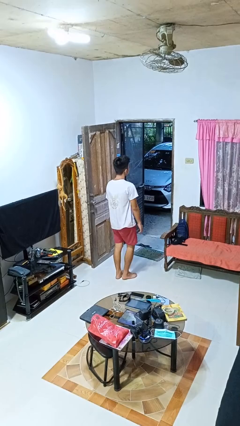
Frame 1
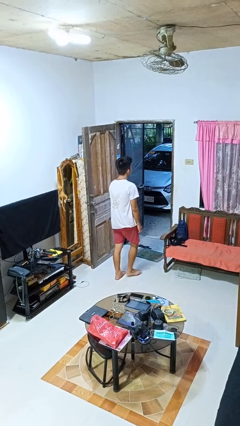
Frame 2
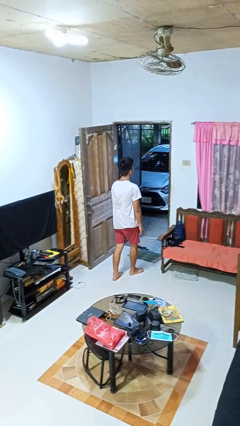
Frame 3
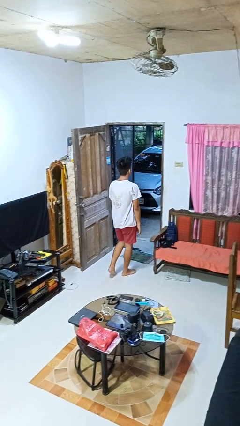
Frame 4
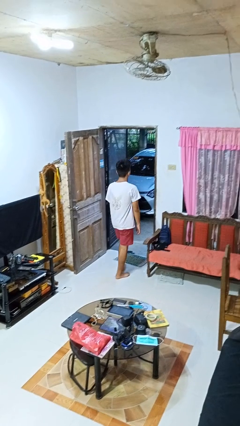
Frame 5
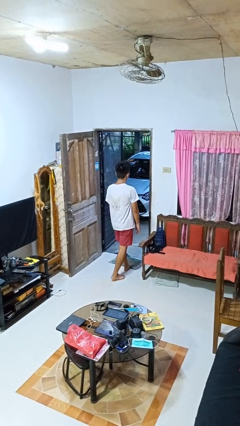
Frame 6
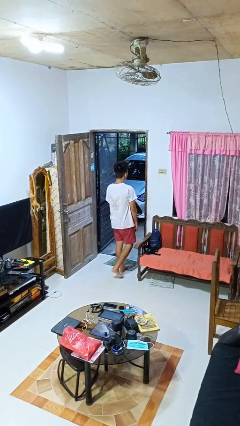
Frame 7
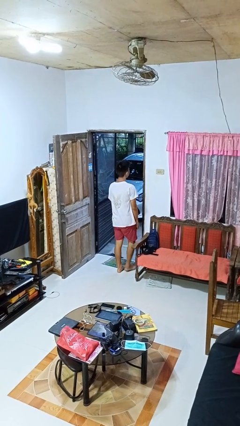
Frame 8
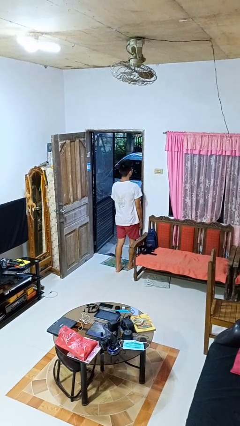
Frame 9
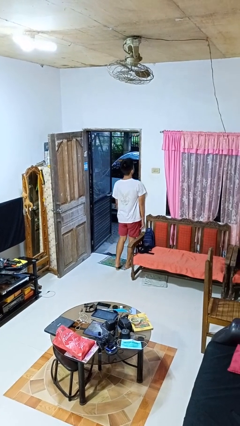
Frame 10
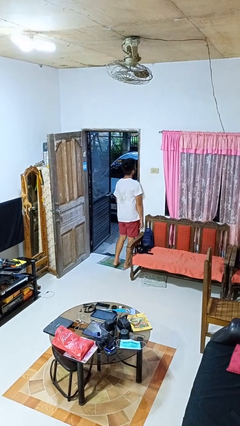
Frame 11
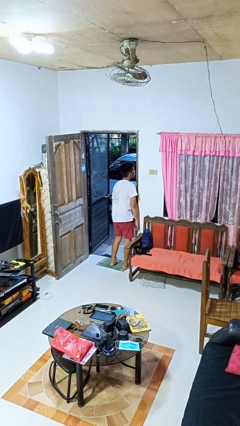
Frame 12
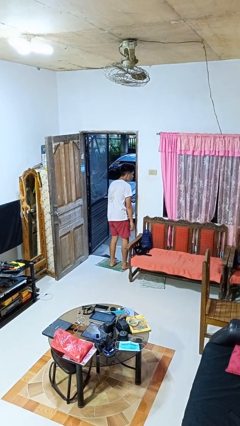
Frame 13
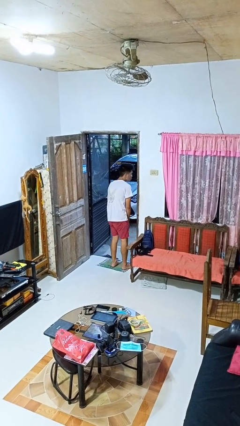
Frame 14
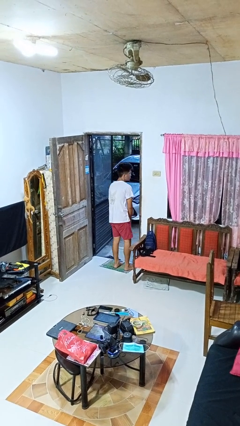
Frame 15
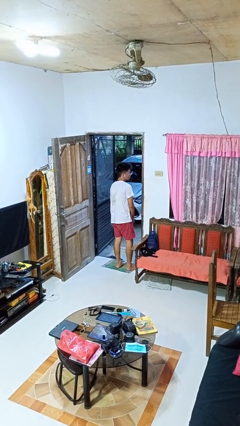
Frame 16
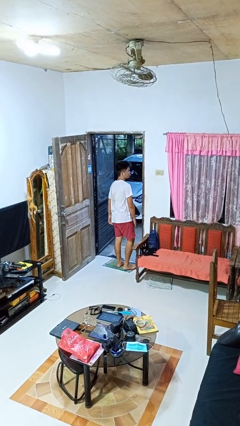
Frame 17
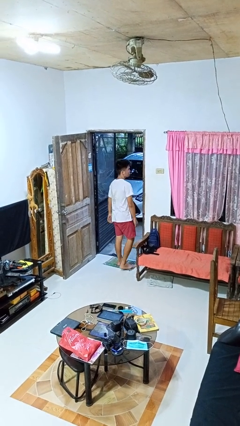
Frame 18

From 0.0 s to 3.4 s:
person bumps into wall

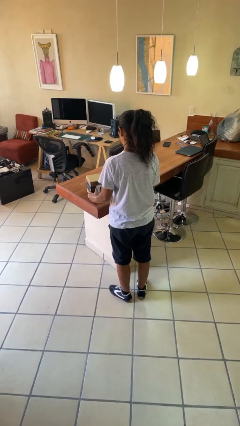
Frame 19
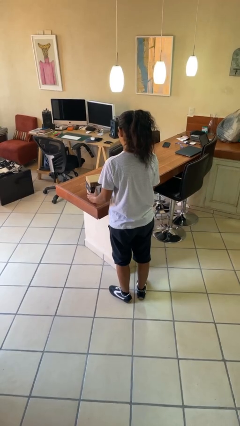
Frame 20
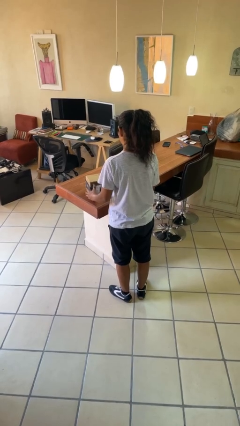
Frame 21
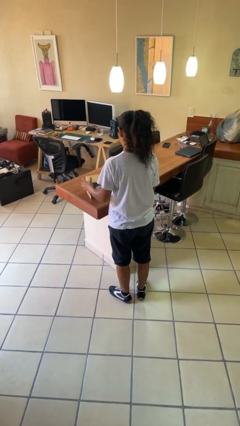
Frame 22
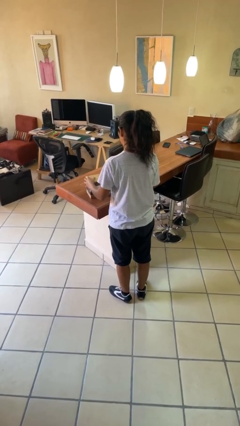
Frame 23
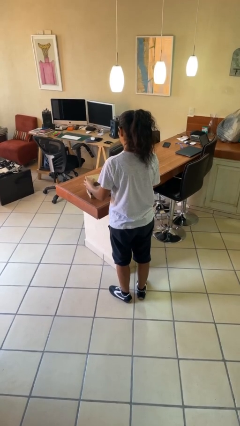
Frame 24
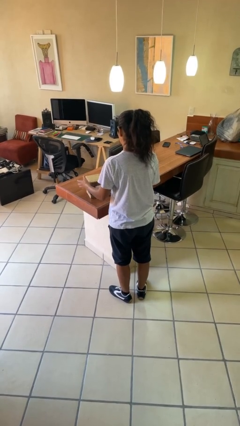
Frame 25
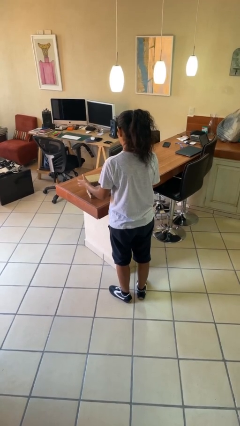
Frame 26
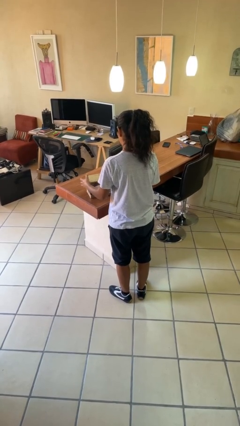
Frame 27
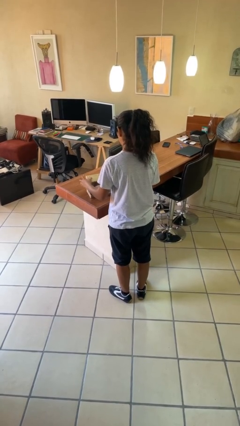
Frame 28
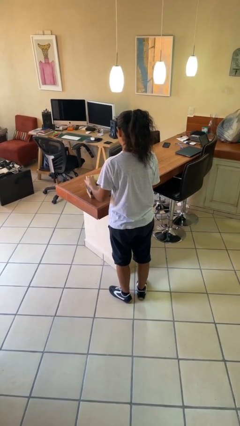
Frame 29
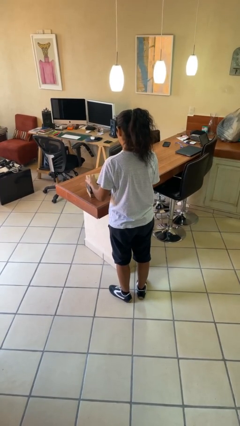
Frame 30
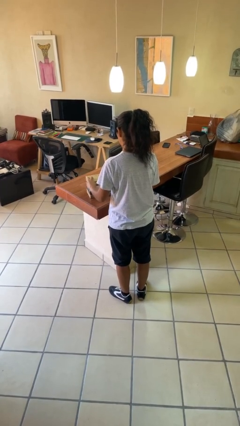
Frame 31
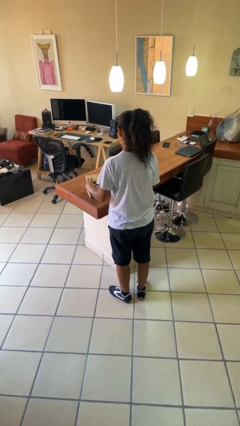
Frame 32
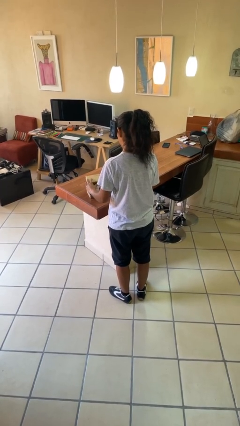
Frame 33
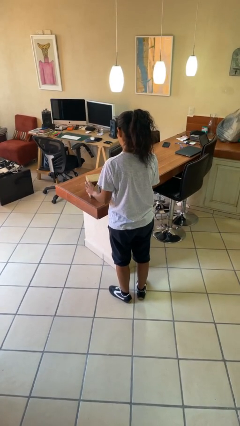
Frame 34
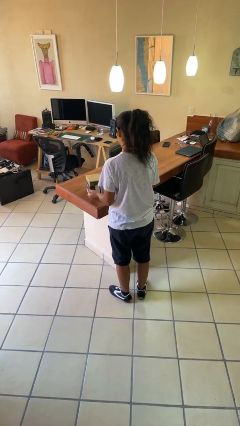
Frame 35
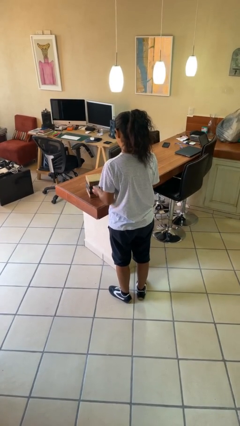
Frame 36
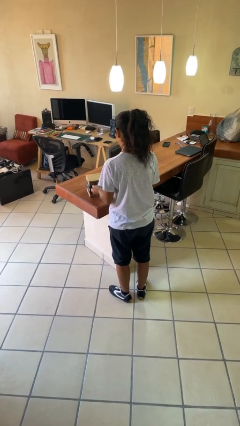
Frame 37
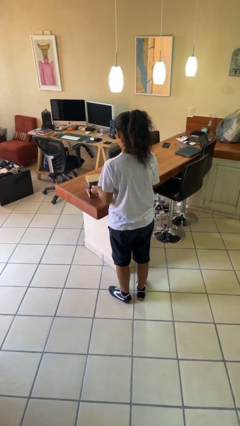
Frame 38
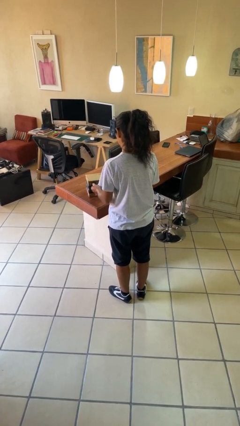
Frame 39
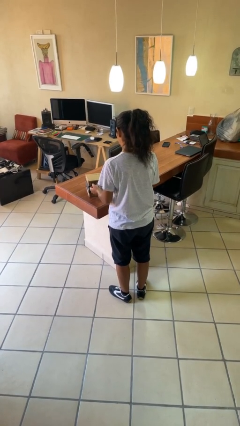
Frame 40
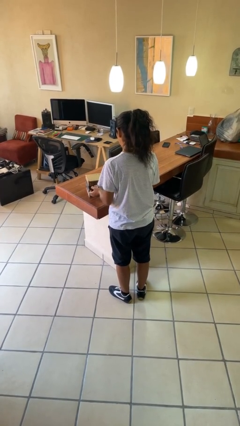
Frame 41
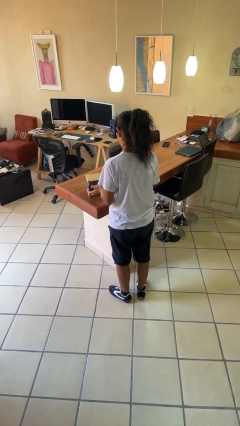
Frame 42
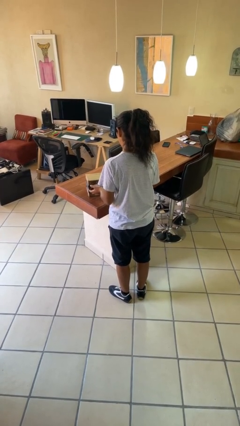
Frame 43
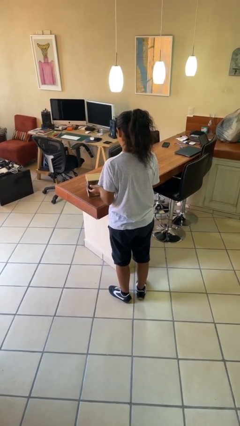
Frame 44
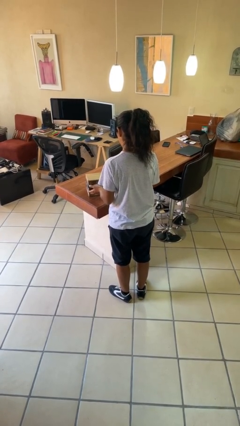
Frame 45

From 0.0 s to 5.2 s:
person taps object with finger

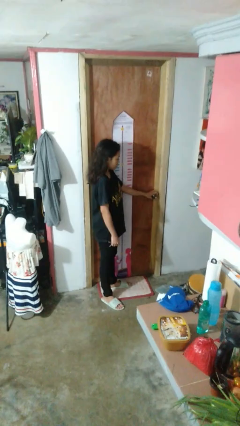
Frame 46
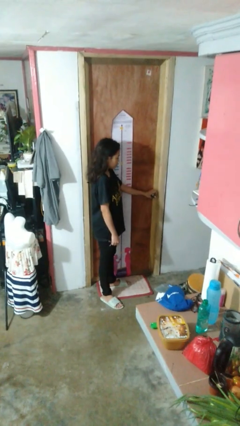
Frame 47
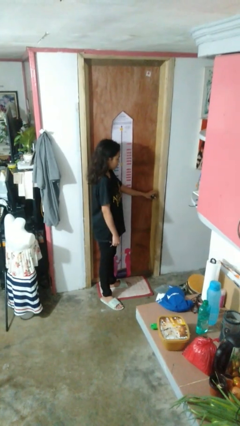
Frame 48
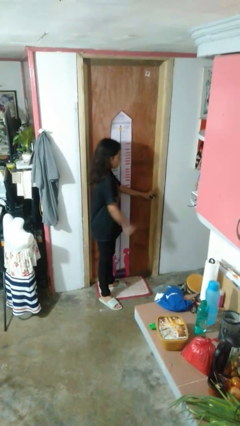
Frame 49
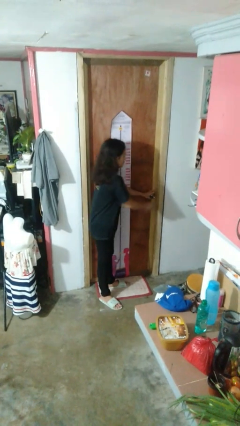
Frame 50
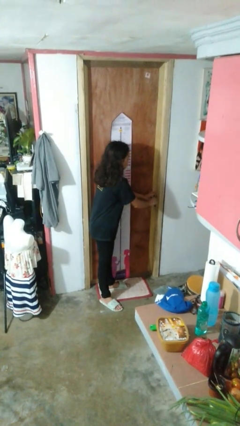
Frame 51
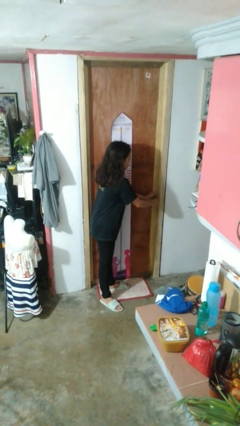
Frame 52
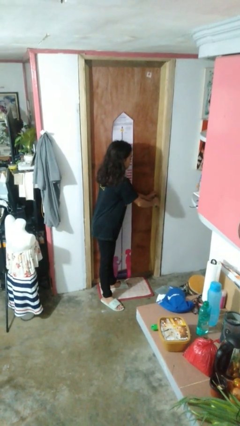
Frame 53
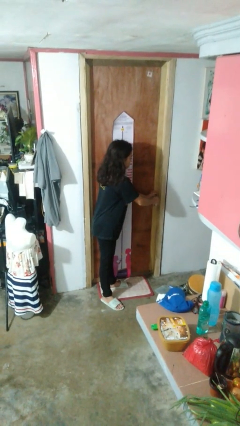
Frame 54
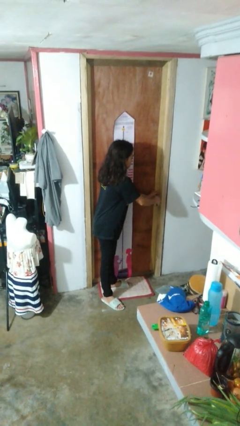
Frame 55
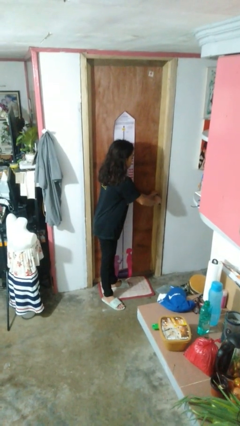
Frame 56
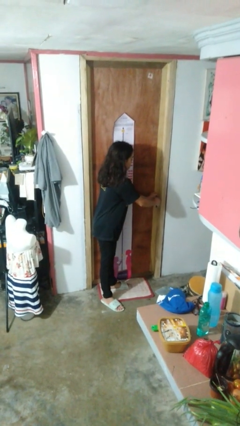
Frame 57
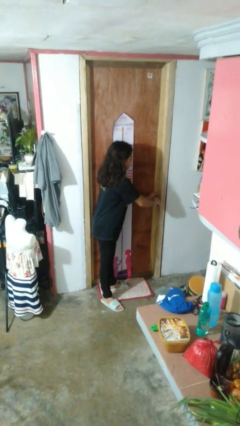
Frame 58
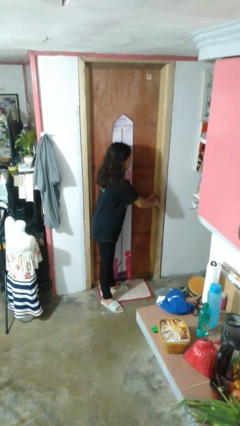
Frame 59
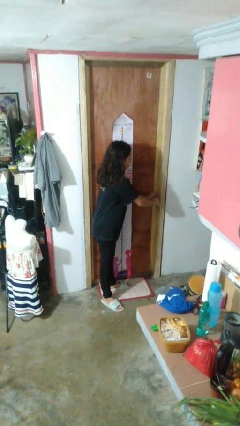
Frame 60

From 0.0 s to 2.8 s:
person unlocks door with keys

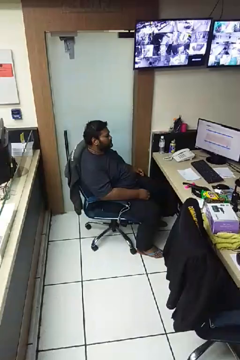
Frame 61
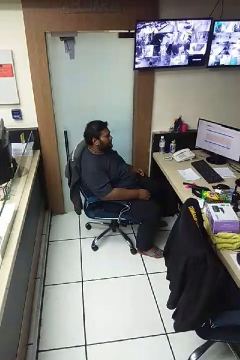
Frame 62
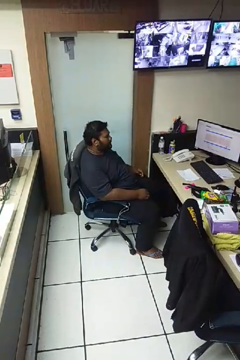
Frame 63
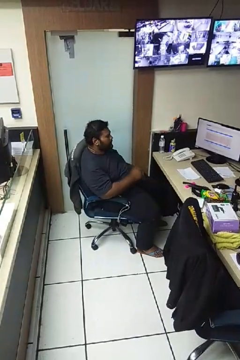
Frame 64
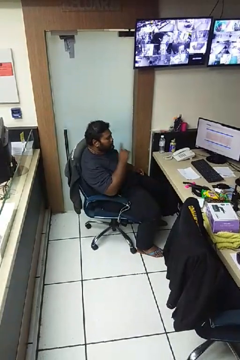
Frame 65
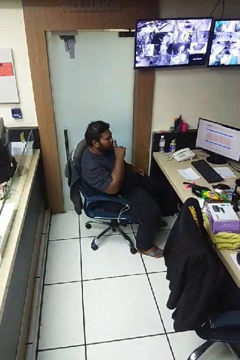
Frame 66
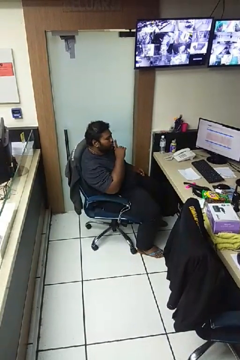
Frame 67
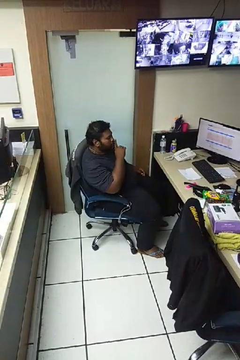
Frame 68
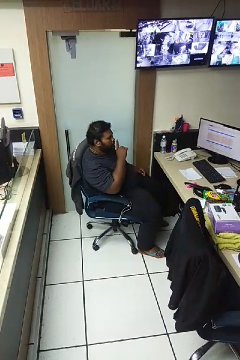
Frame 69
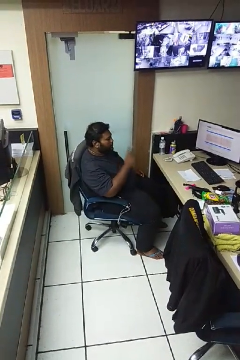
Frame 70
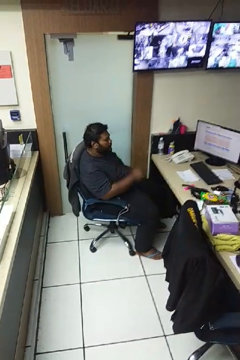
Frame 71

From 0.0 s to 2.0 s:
person gestures be quiet

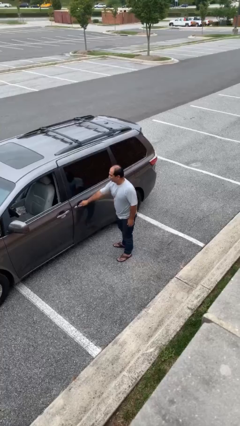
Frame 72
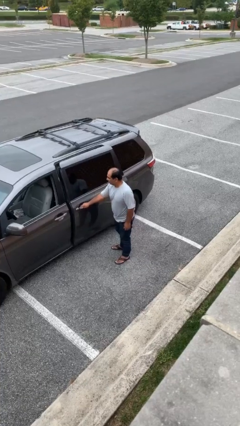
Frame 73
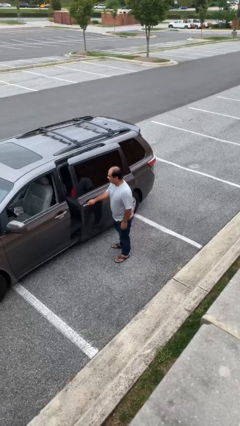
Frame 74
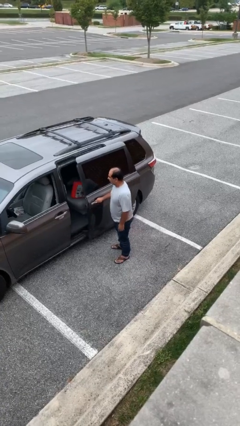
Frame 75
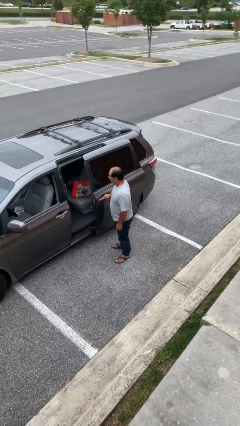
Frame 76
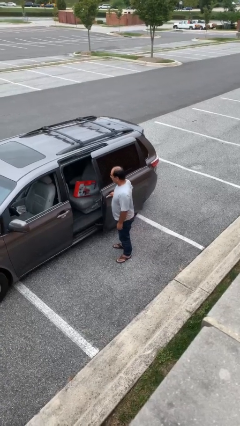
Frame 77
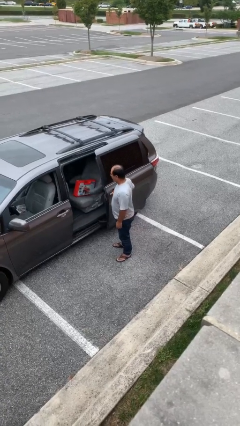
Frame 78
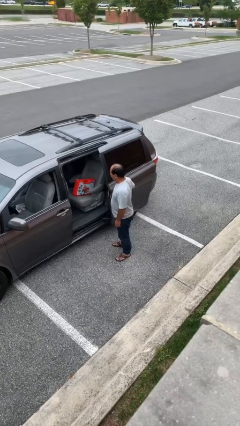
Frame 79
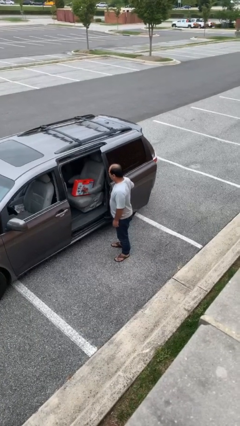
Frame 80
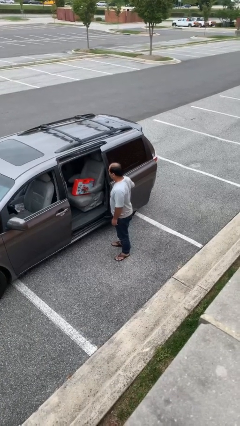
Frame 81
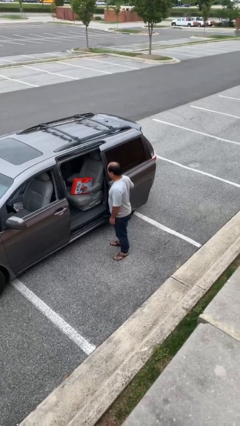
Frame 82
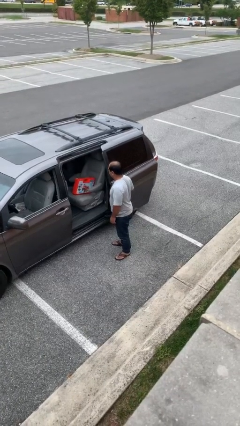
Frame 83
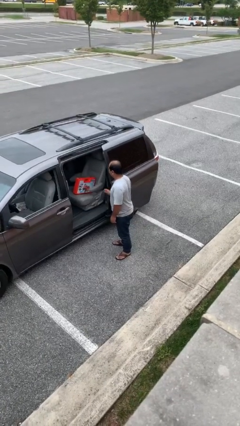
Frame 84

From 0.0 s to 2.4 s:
person opens car door

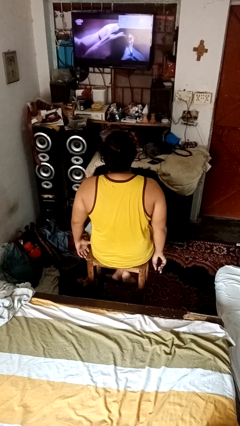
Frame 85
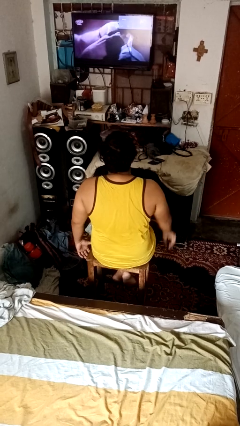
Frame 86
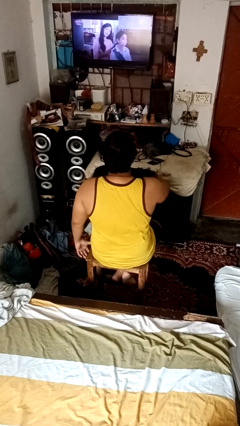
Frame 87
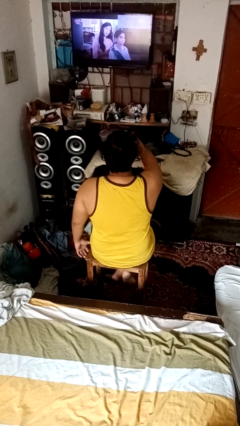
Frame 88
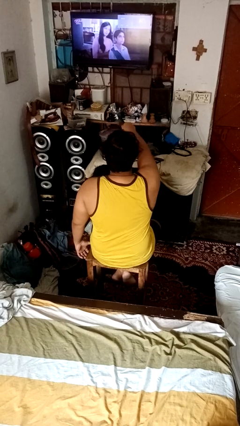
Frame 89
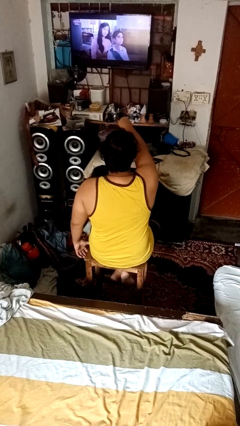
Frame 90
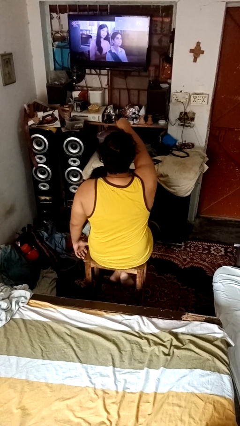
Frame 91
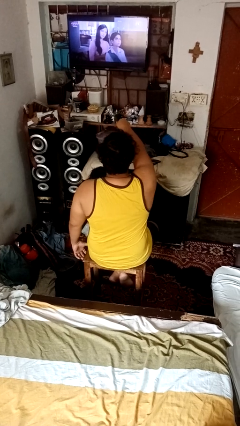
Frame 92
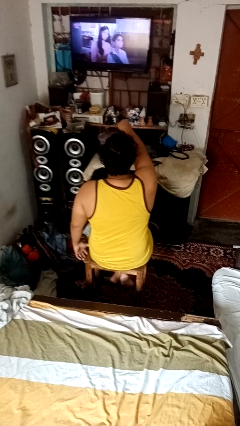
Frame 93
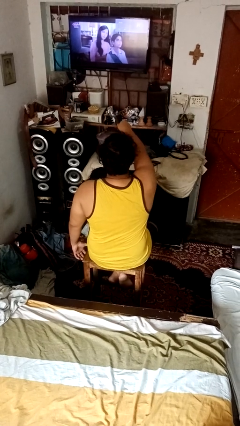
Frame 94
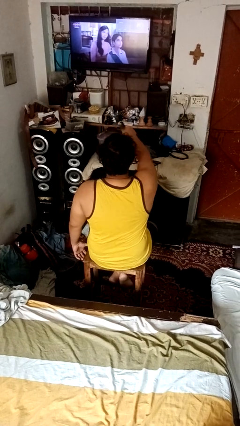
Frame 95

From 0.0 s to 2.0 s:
person uses television remote
